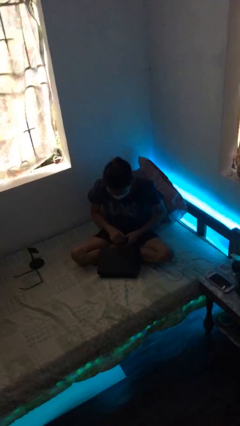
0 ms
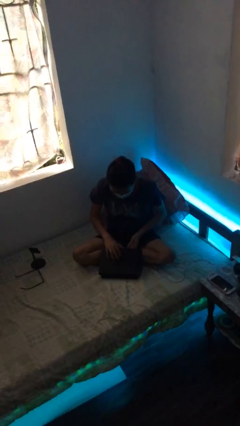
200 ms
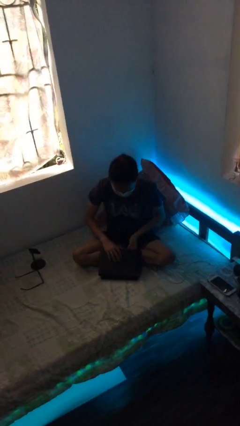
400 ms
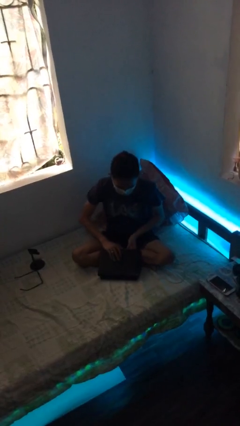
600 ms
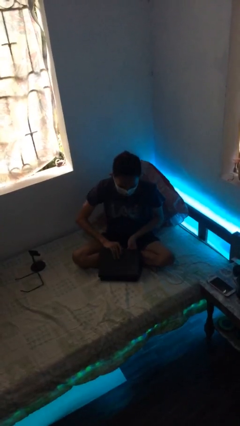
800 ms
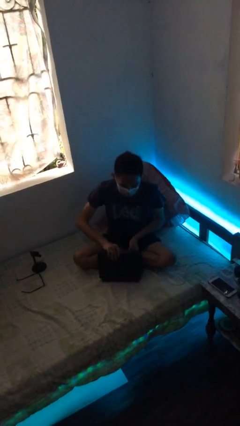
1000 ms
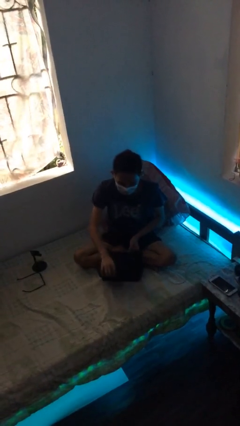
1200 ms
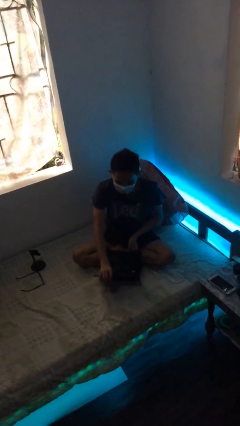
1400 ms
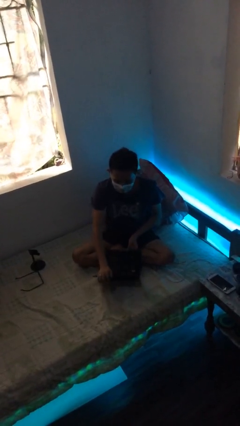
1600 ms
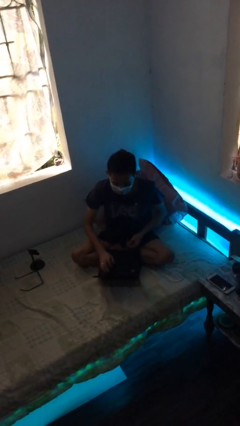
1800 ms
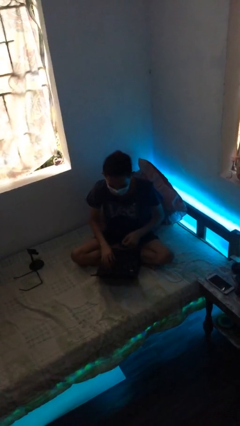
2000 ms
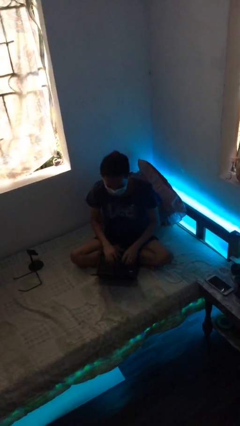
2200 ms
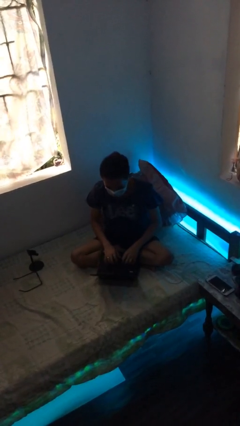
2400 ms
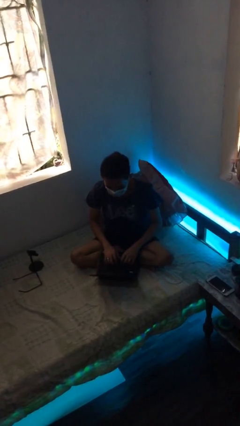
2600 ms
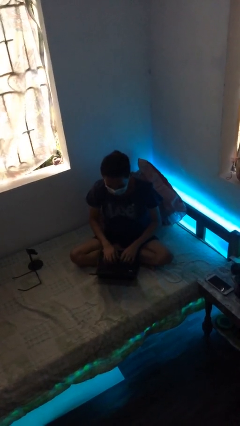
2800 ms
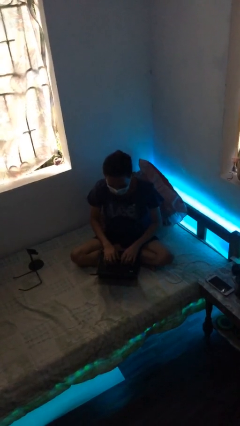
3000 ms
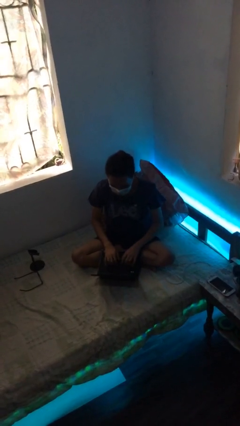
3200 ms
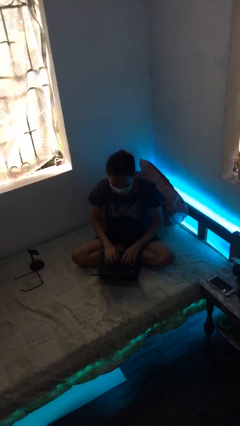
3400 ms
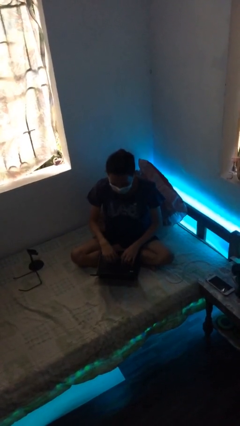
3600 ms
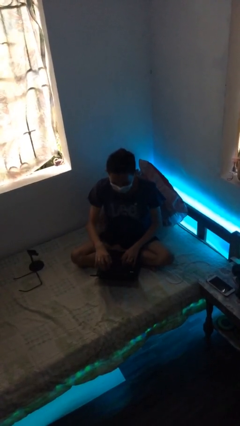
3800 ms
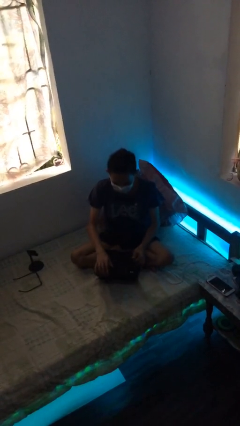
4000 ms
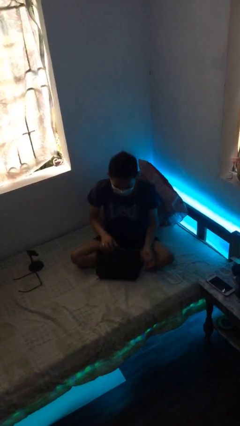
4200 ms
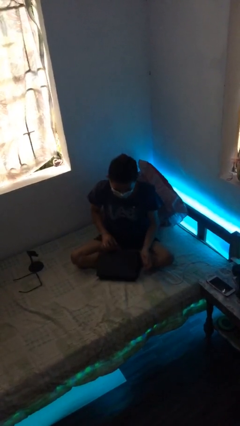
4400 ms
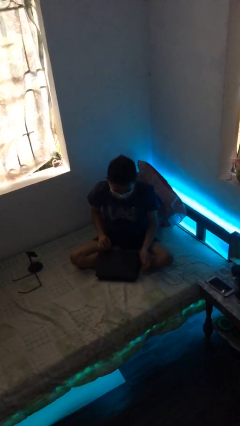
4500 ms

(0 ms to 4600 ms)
person interacts with laptop

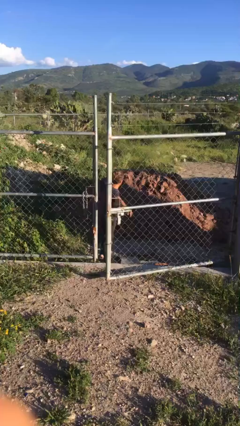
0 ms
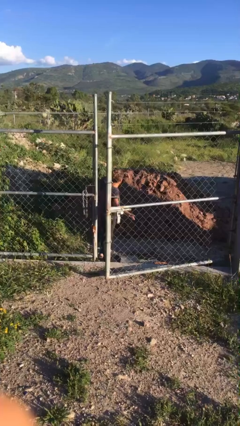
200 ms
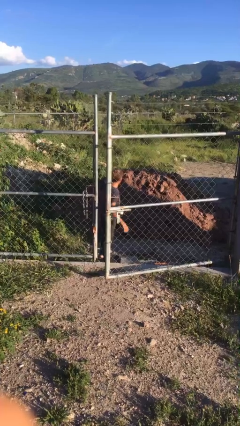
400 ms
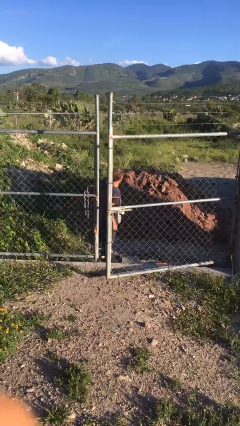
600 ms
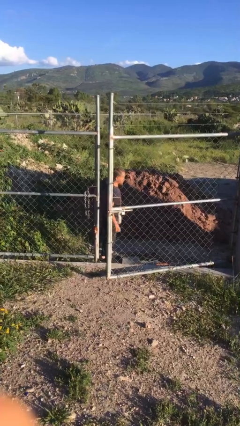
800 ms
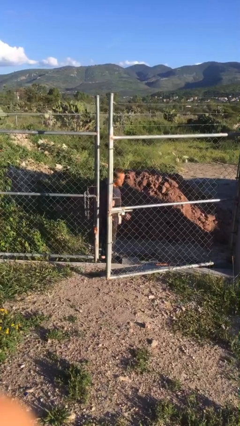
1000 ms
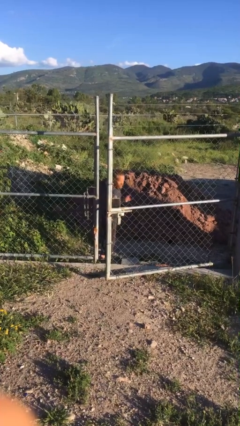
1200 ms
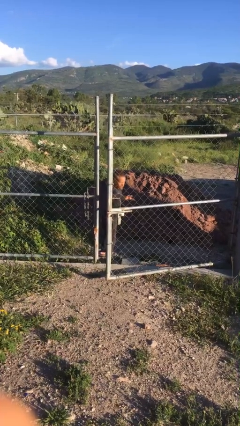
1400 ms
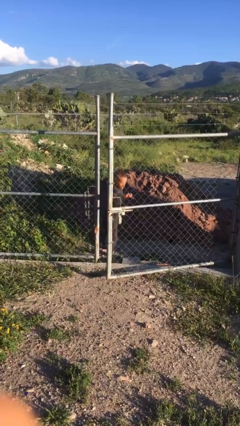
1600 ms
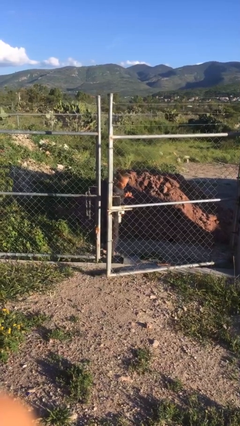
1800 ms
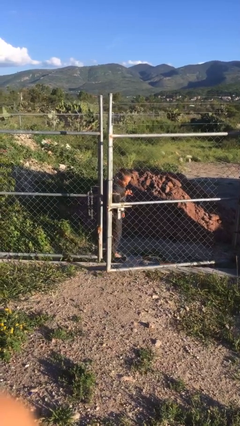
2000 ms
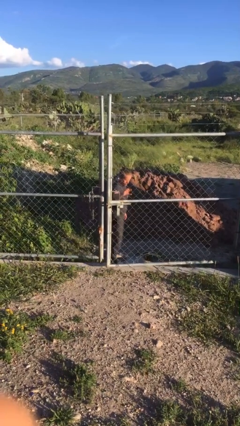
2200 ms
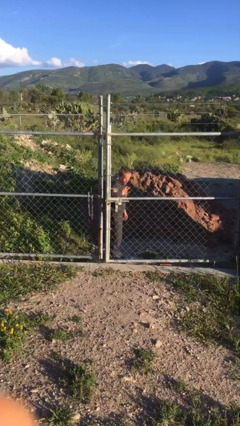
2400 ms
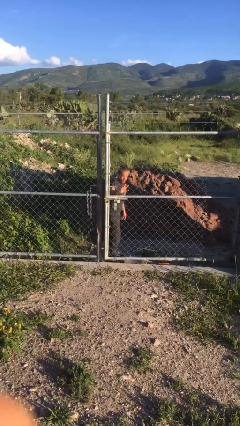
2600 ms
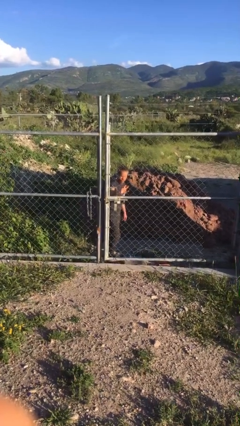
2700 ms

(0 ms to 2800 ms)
person closes gate

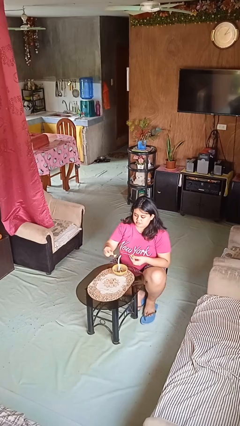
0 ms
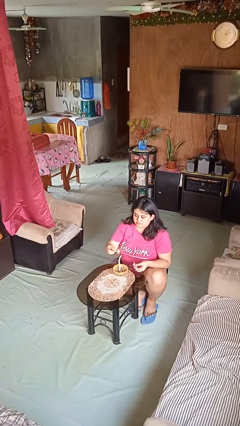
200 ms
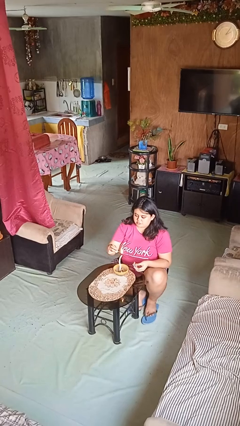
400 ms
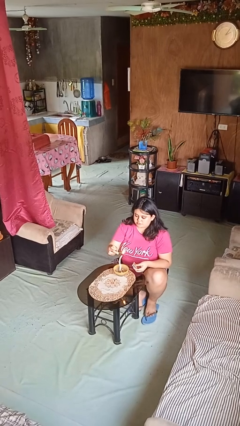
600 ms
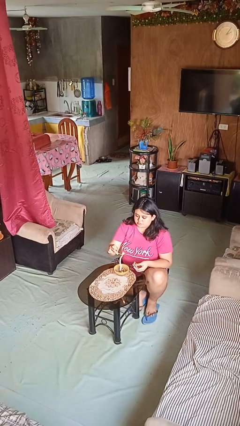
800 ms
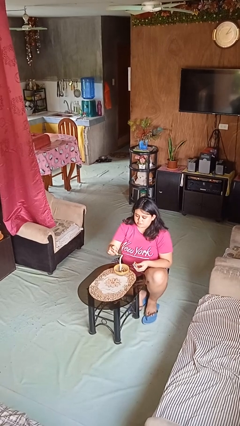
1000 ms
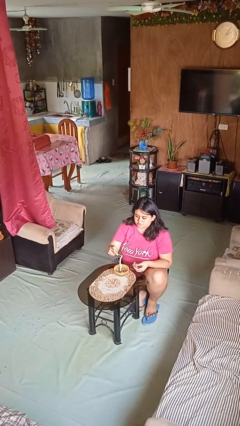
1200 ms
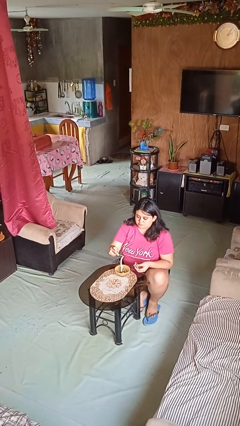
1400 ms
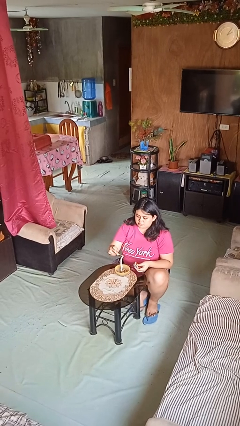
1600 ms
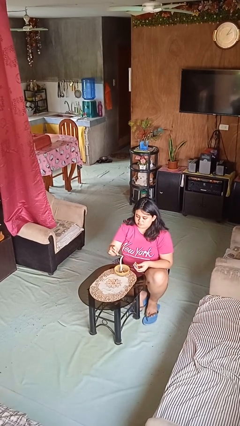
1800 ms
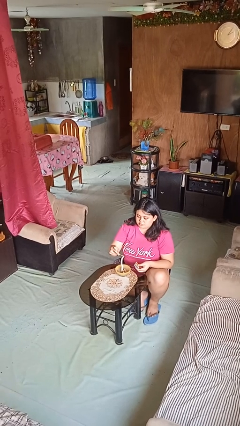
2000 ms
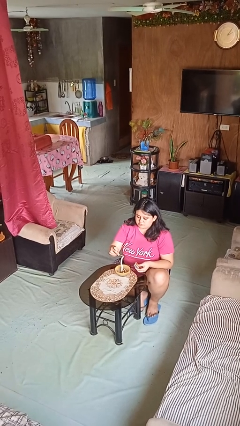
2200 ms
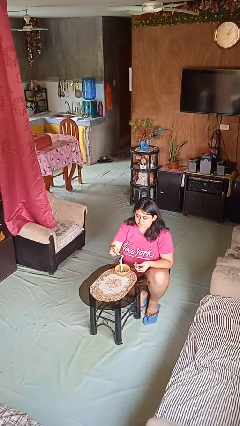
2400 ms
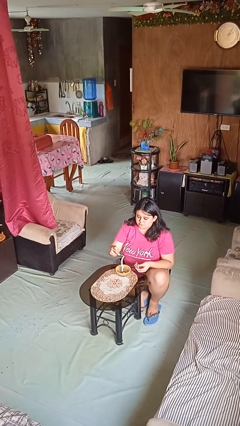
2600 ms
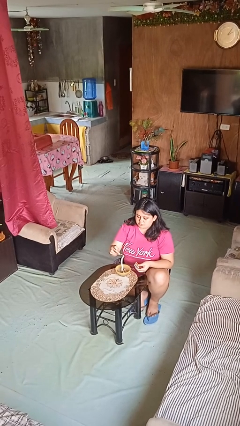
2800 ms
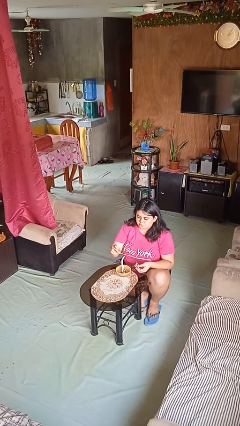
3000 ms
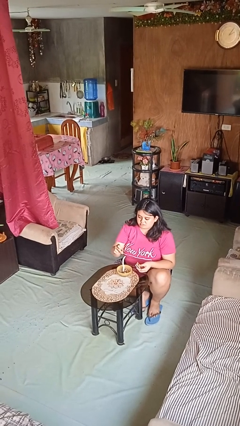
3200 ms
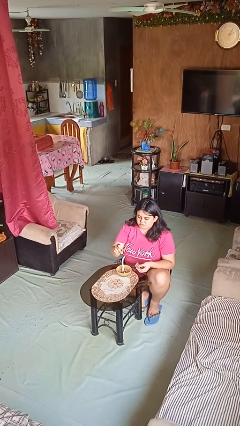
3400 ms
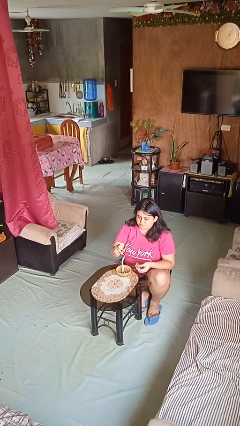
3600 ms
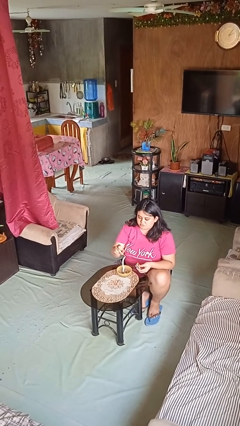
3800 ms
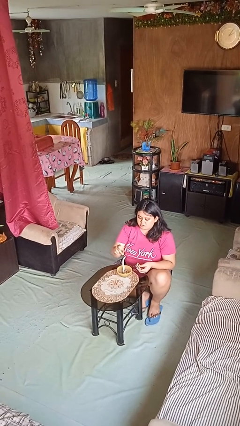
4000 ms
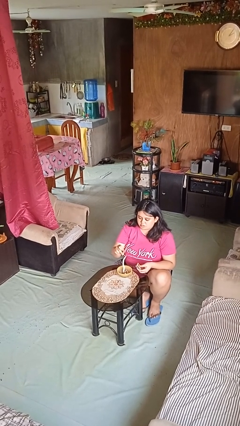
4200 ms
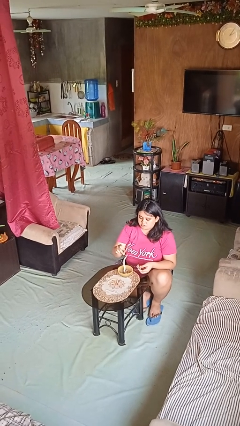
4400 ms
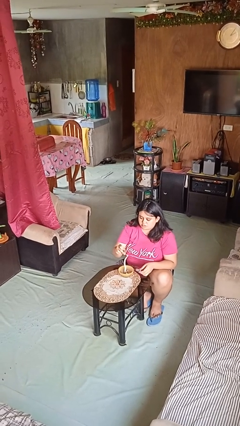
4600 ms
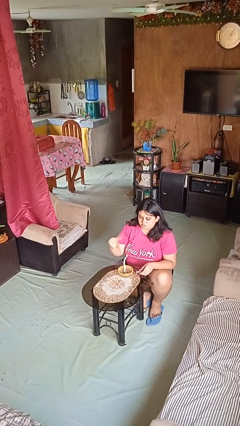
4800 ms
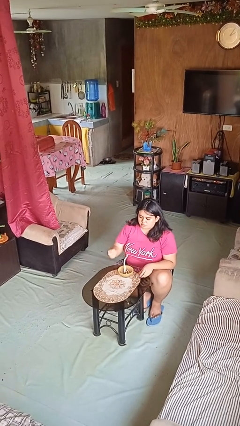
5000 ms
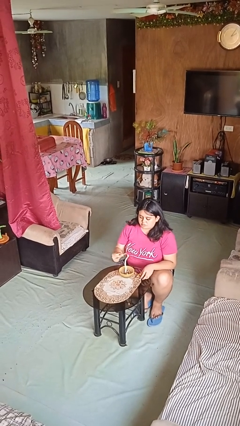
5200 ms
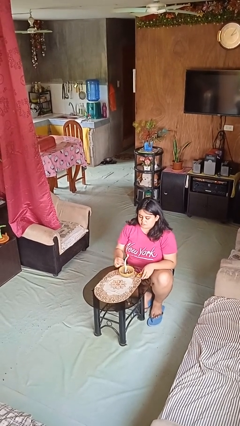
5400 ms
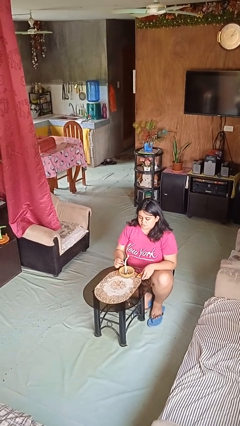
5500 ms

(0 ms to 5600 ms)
person lights candle

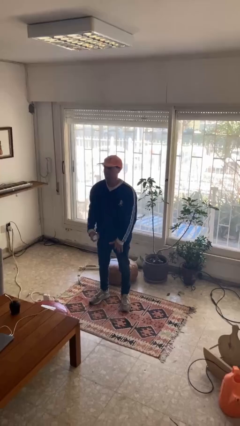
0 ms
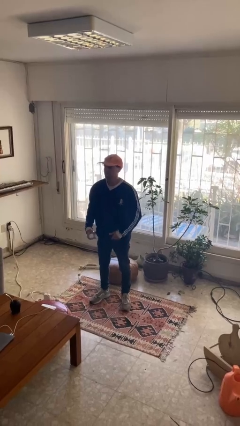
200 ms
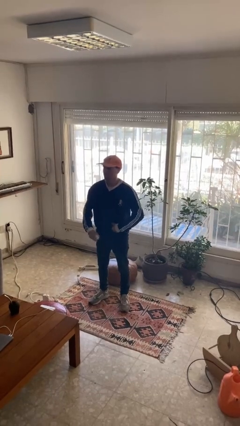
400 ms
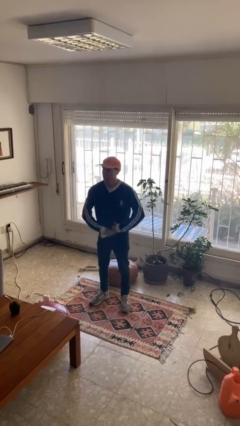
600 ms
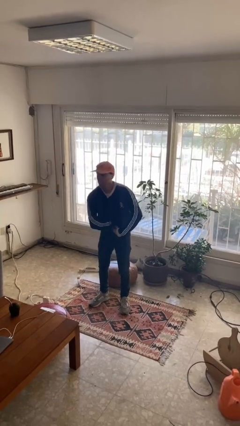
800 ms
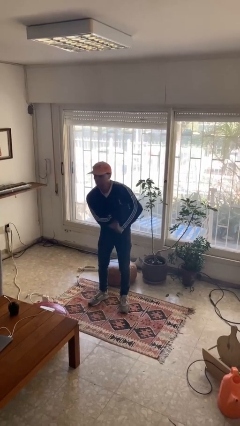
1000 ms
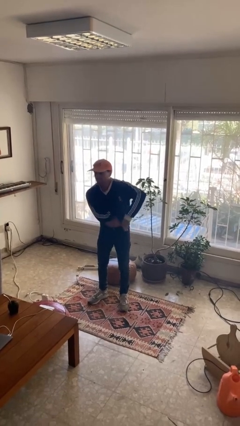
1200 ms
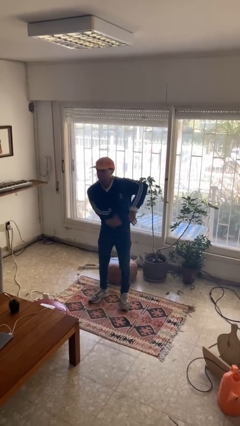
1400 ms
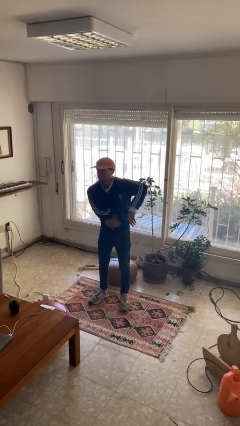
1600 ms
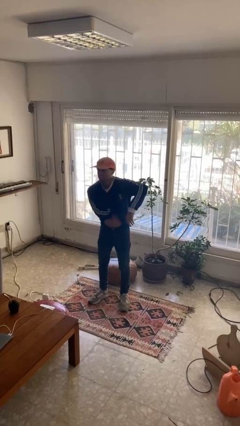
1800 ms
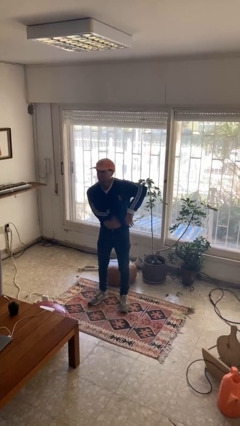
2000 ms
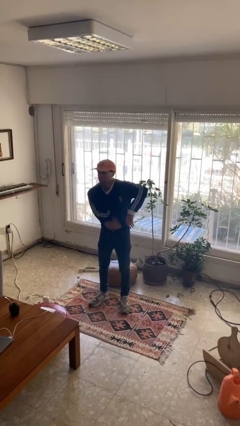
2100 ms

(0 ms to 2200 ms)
person applies deodorant

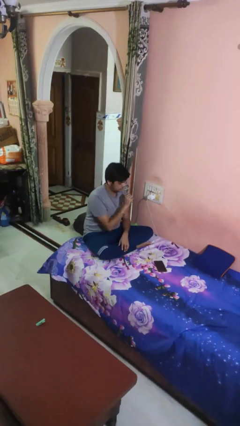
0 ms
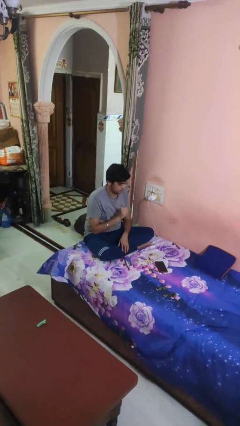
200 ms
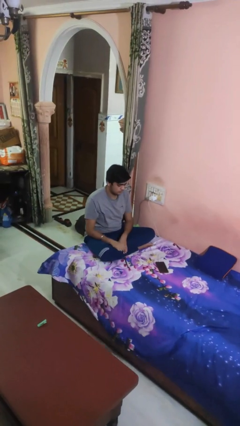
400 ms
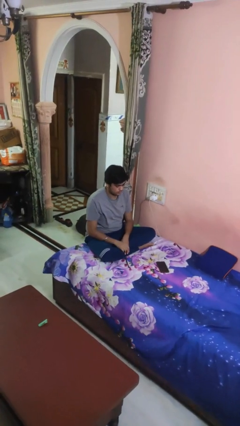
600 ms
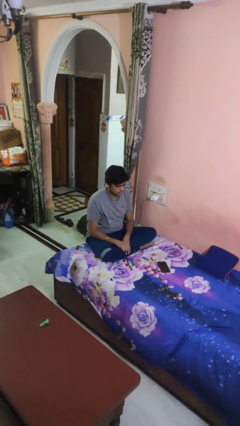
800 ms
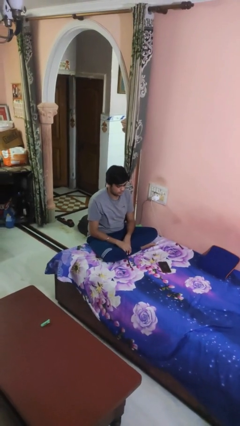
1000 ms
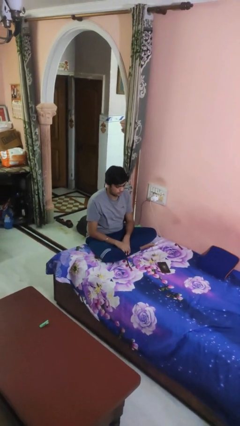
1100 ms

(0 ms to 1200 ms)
person plugs into electrical socket

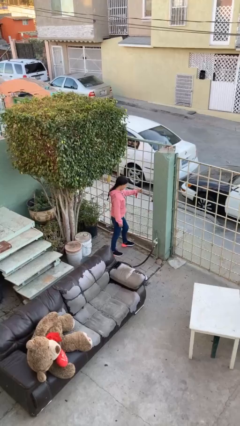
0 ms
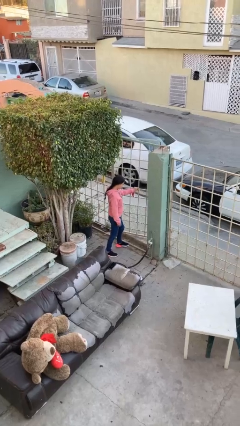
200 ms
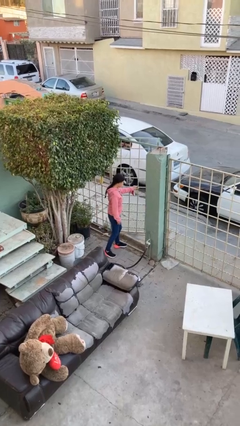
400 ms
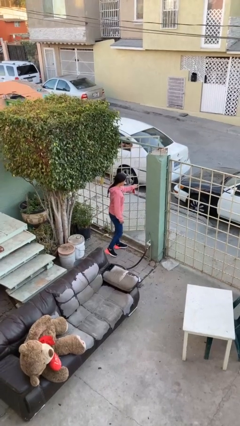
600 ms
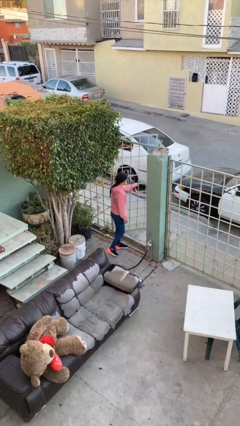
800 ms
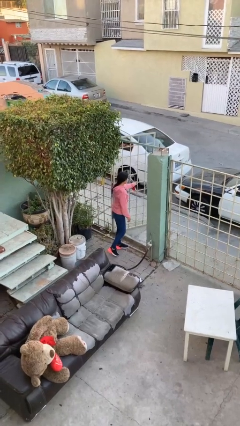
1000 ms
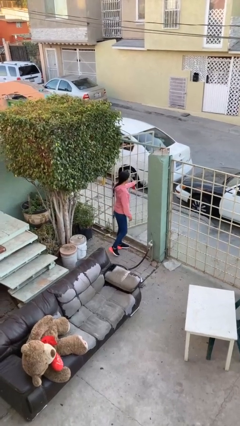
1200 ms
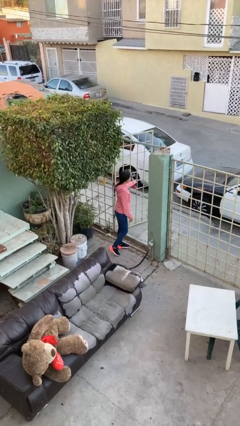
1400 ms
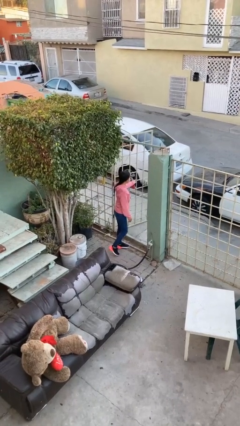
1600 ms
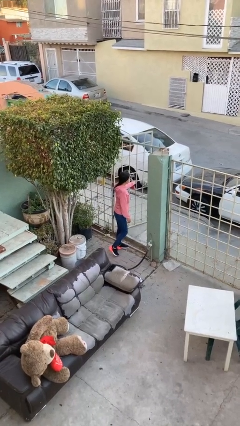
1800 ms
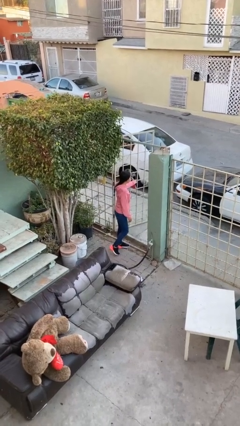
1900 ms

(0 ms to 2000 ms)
person opens facility door
